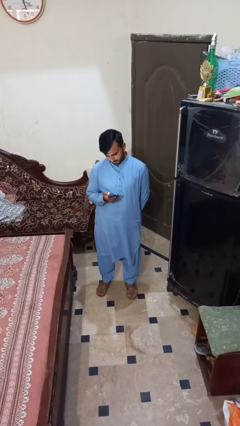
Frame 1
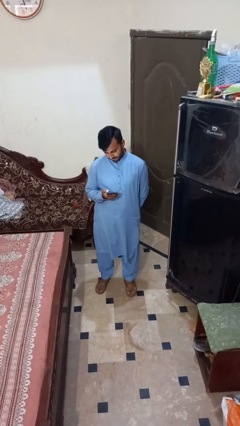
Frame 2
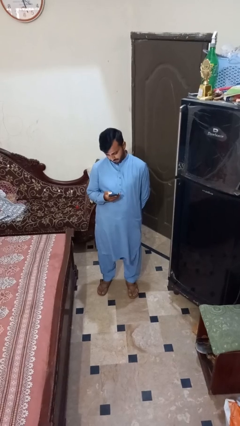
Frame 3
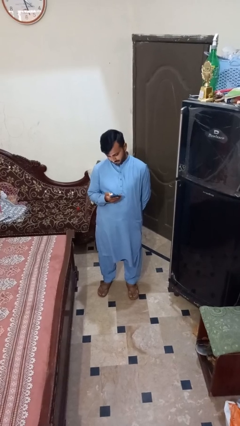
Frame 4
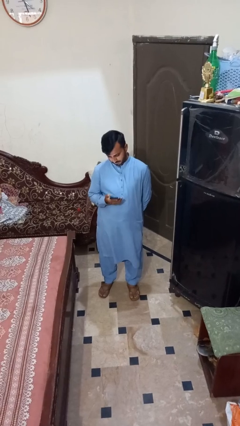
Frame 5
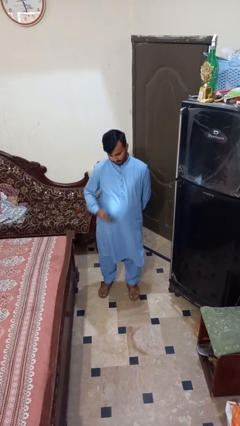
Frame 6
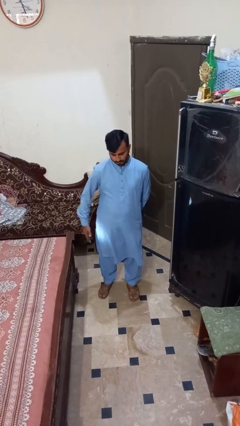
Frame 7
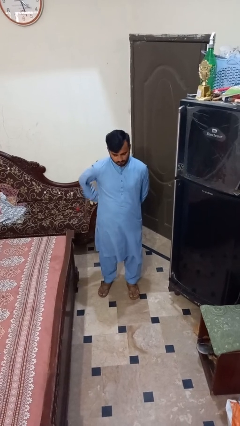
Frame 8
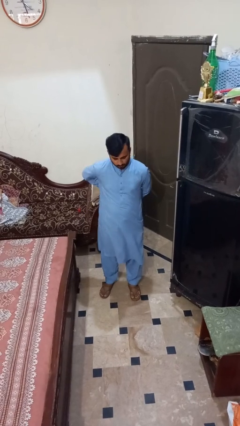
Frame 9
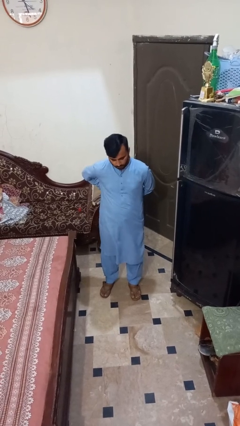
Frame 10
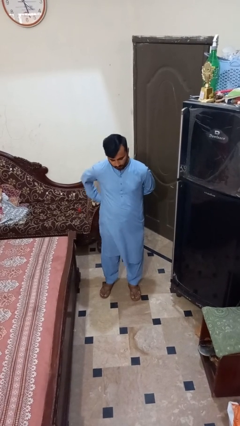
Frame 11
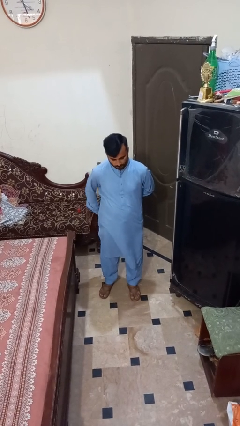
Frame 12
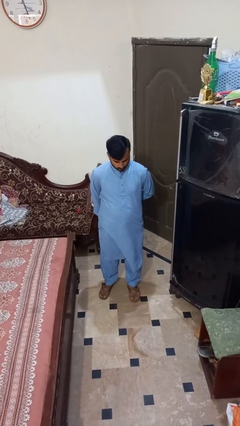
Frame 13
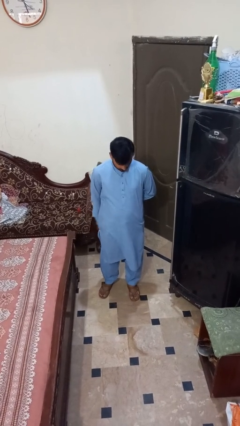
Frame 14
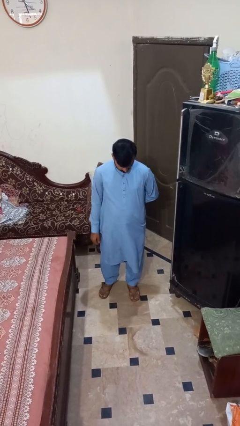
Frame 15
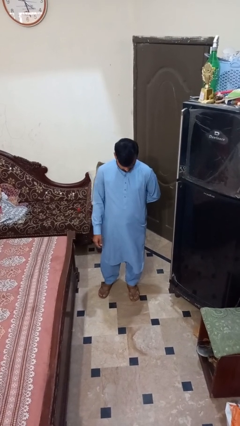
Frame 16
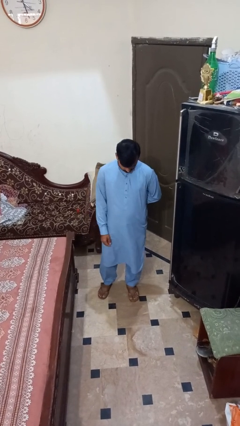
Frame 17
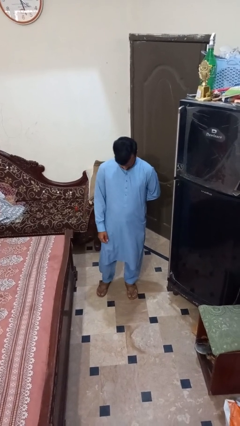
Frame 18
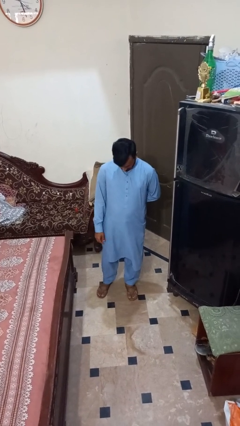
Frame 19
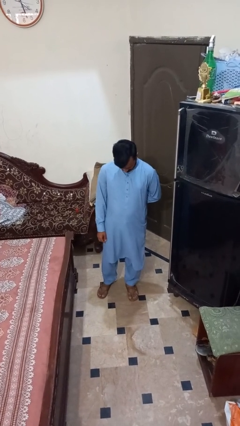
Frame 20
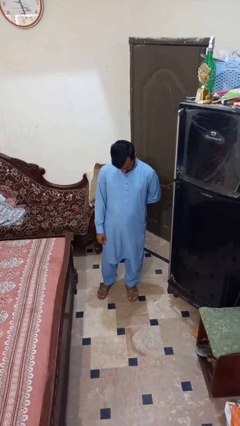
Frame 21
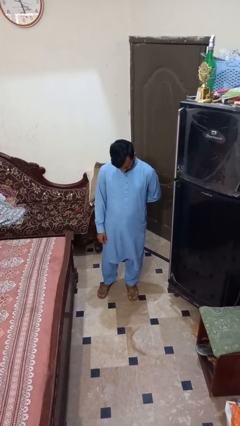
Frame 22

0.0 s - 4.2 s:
person puts phone into pocket

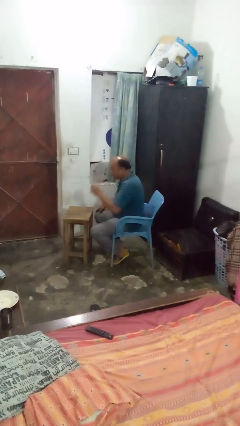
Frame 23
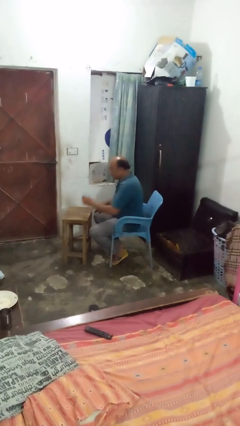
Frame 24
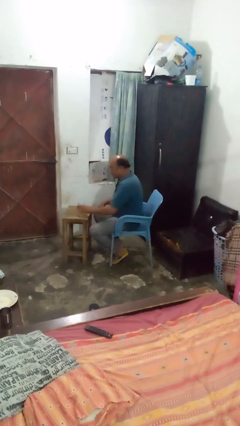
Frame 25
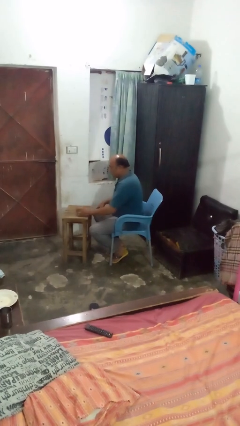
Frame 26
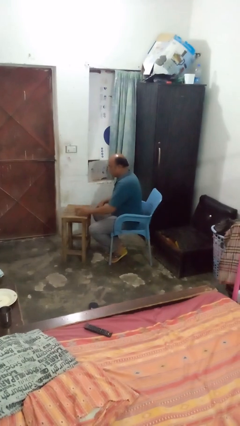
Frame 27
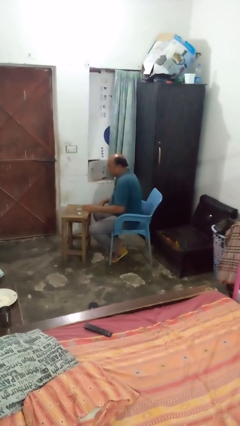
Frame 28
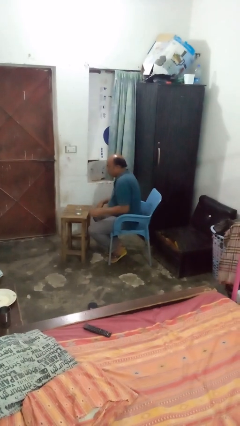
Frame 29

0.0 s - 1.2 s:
person puts down object on table

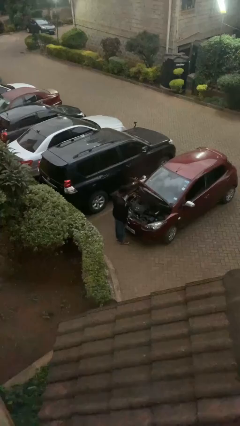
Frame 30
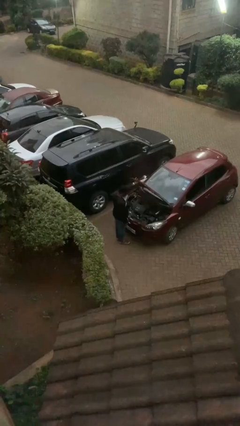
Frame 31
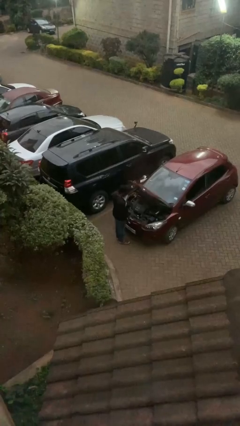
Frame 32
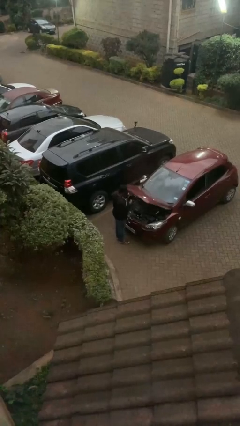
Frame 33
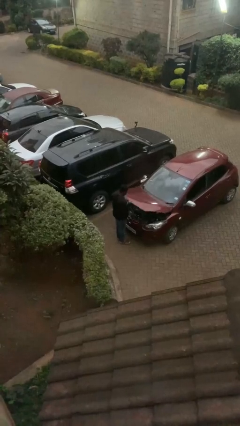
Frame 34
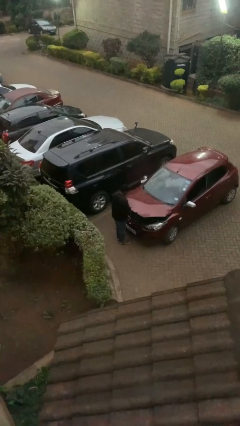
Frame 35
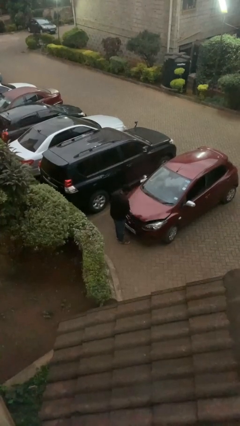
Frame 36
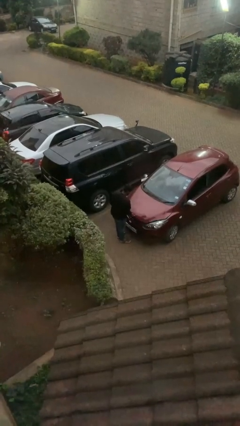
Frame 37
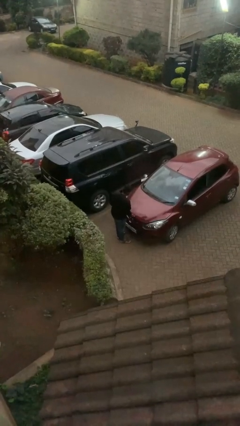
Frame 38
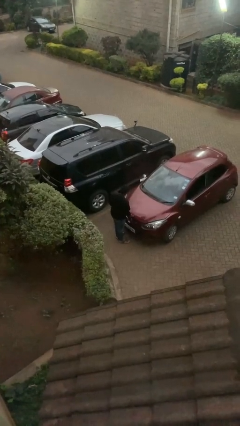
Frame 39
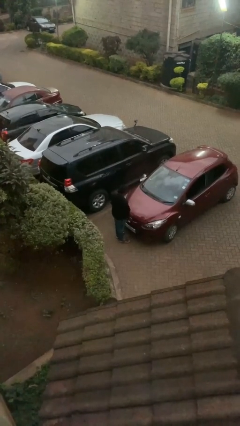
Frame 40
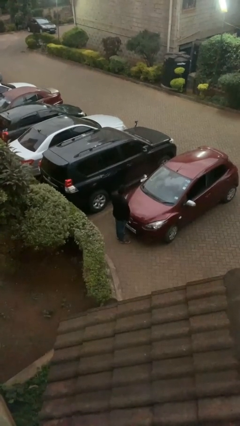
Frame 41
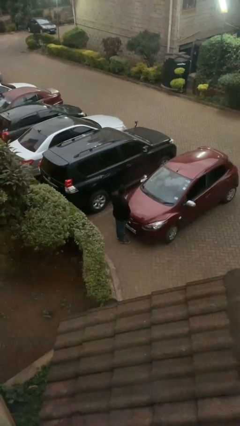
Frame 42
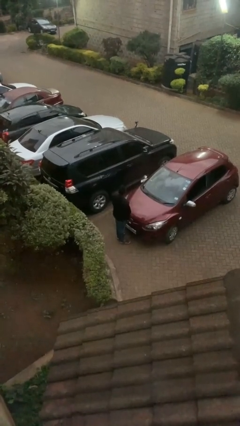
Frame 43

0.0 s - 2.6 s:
person closes car hood

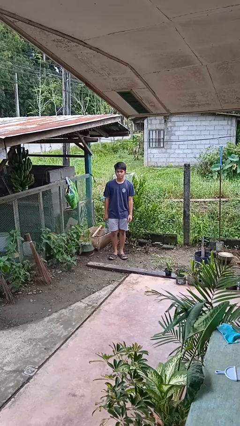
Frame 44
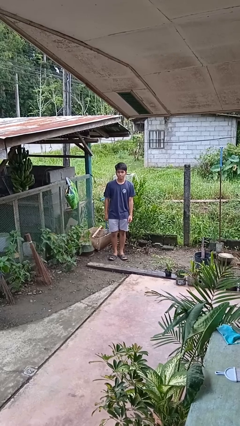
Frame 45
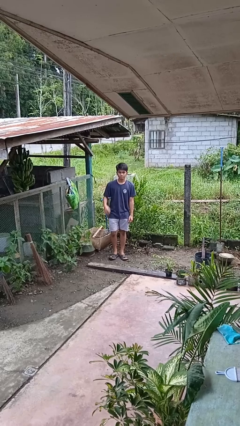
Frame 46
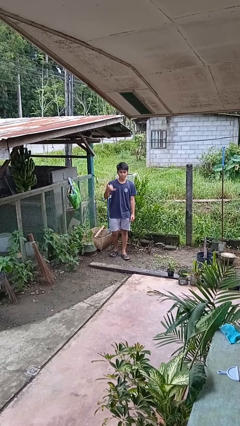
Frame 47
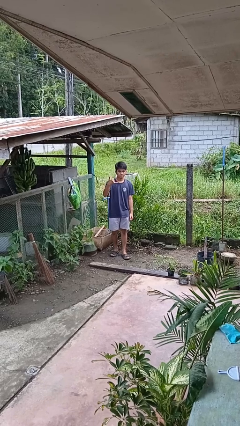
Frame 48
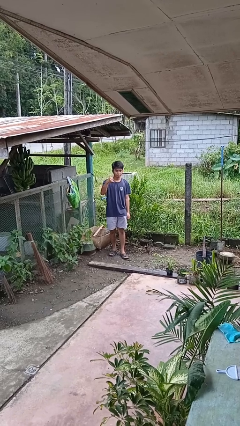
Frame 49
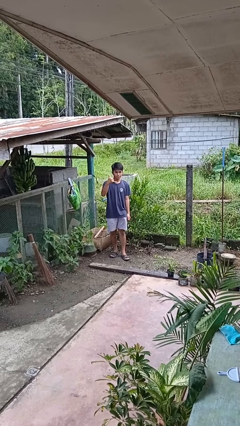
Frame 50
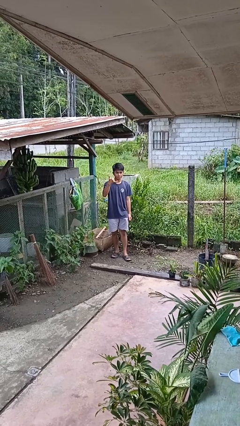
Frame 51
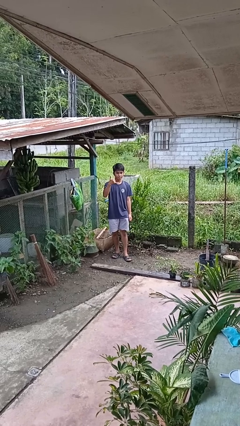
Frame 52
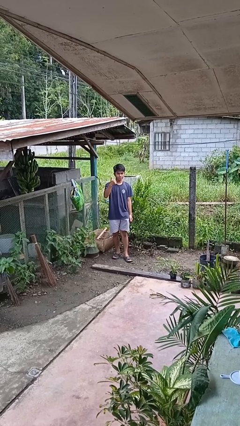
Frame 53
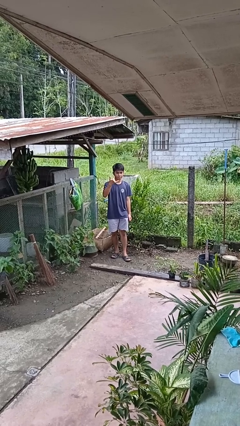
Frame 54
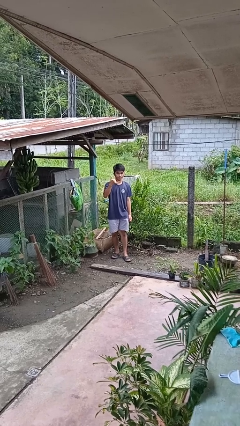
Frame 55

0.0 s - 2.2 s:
person gestures hang loose

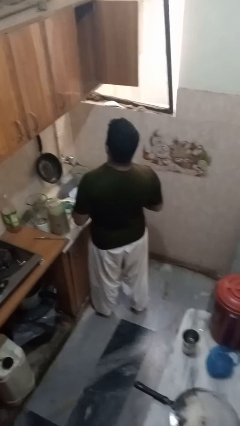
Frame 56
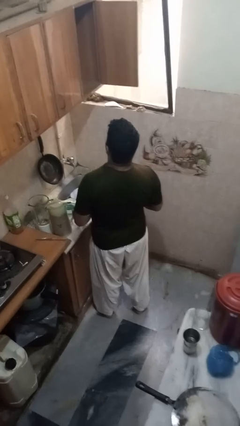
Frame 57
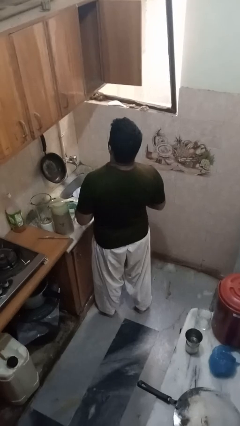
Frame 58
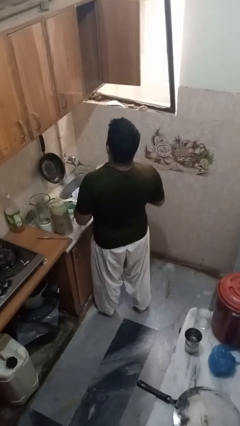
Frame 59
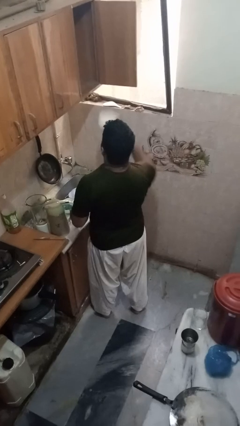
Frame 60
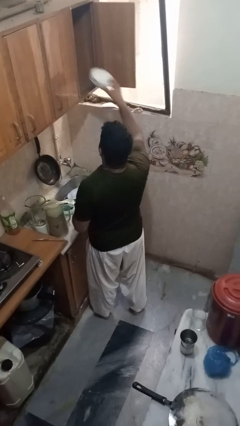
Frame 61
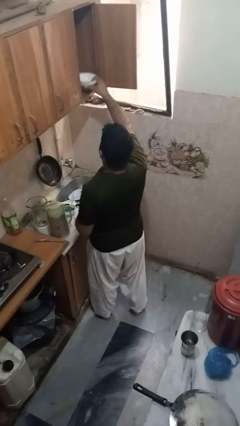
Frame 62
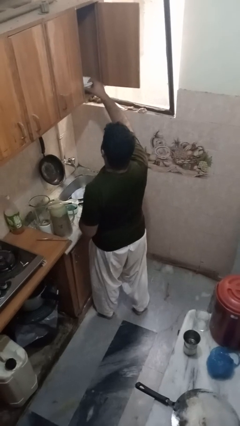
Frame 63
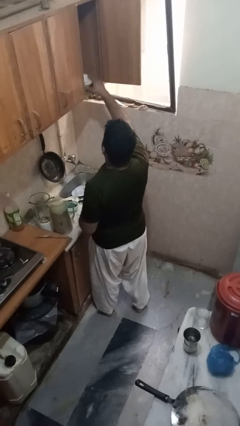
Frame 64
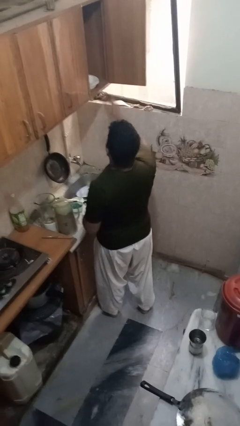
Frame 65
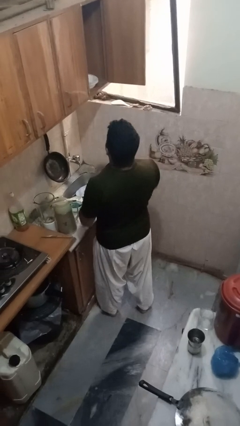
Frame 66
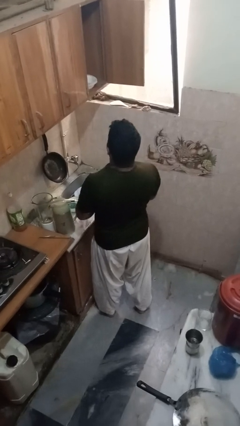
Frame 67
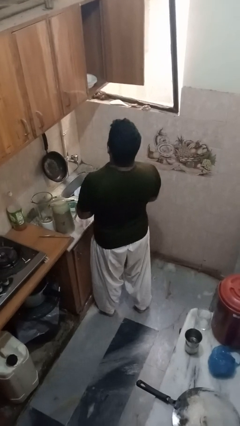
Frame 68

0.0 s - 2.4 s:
person puts object in cabinet

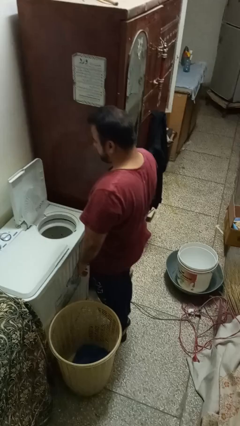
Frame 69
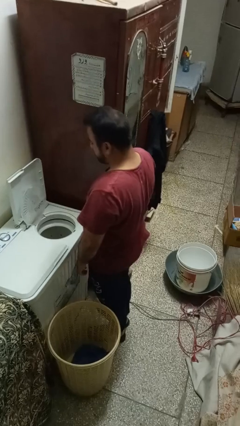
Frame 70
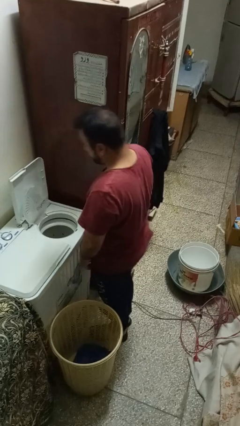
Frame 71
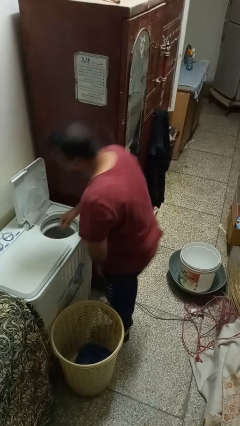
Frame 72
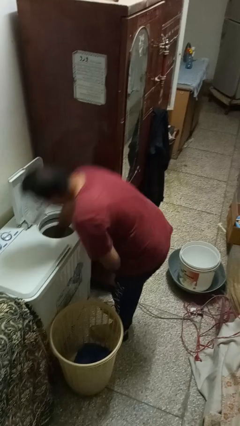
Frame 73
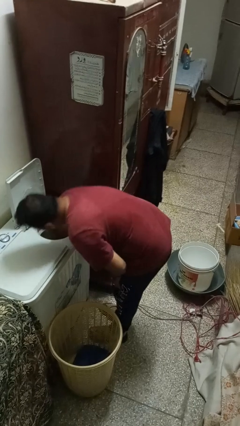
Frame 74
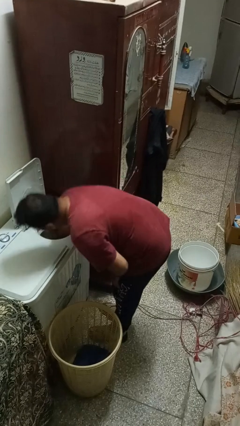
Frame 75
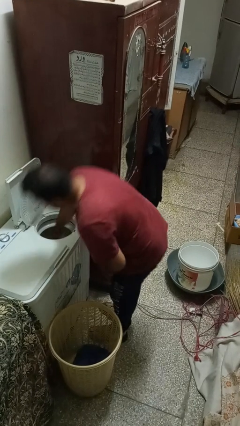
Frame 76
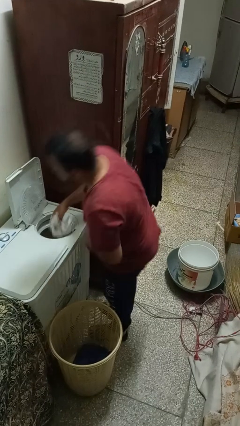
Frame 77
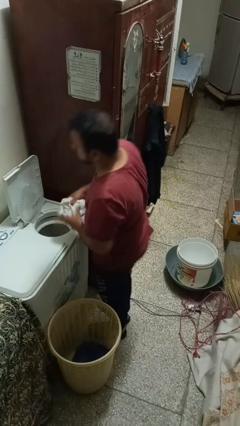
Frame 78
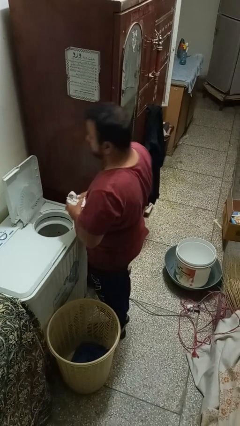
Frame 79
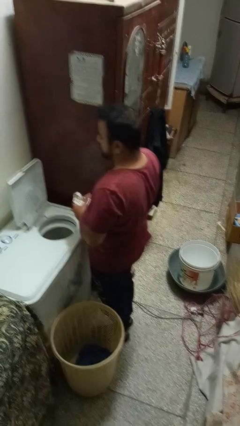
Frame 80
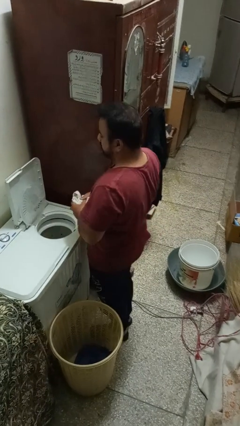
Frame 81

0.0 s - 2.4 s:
person unloads dryer

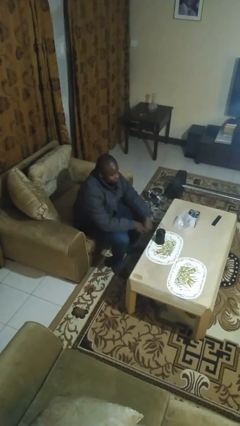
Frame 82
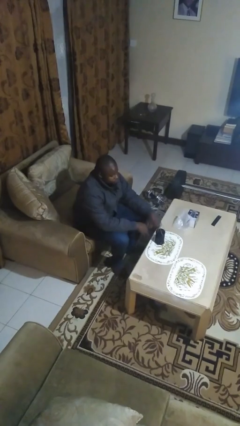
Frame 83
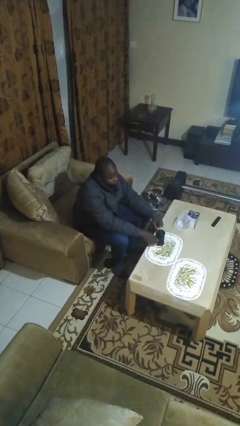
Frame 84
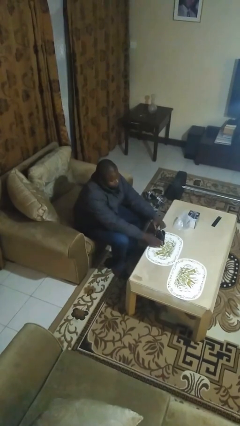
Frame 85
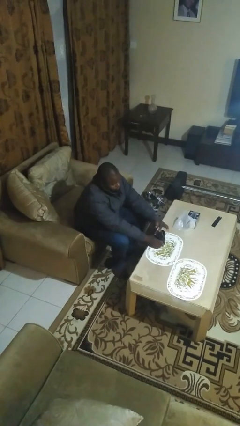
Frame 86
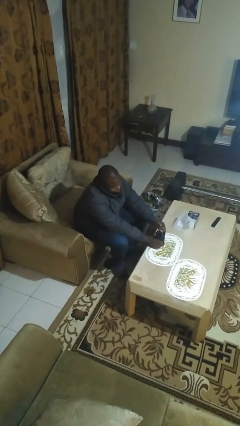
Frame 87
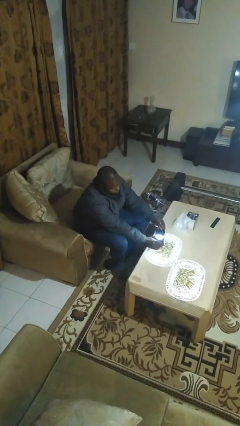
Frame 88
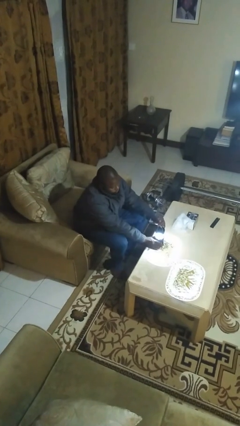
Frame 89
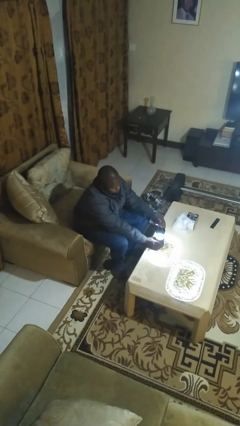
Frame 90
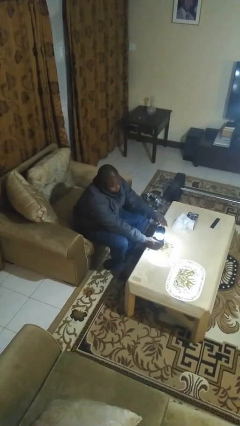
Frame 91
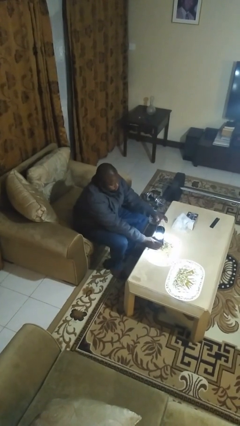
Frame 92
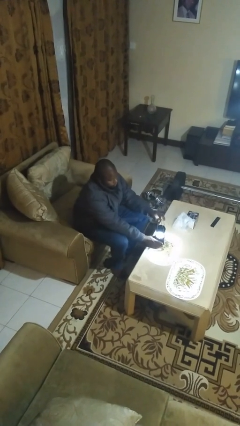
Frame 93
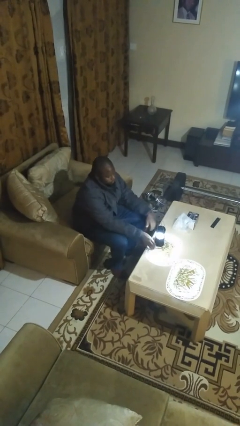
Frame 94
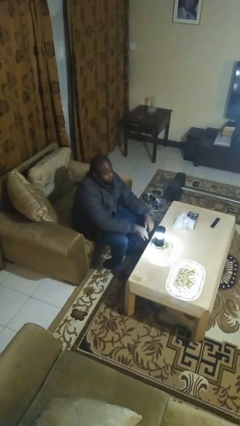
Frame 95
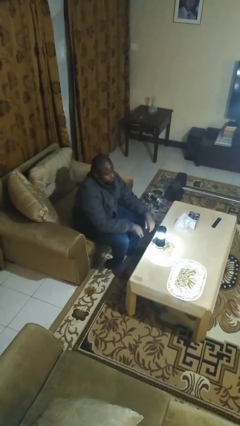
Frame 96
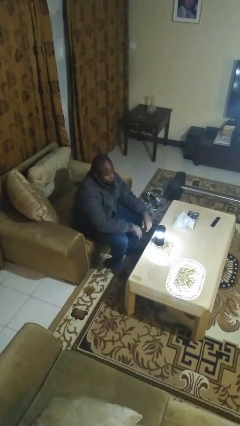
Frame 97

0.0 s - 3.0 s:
person turns off lamp
